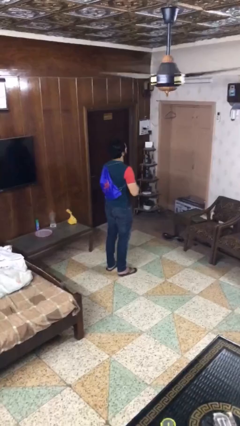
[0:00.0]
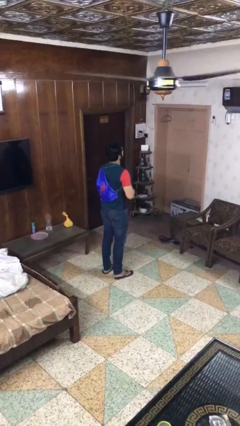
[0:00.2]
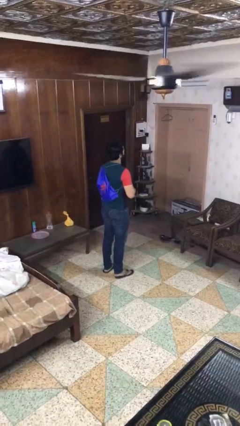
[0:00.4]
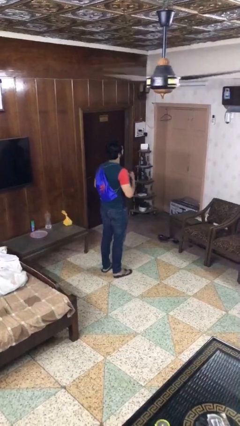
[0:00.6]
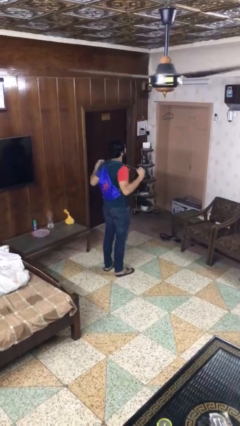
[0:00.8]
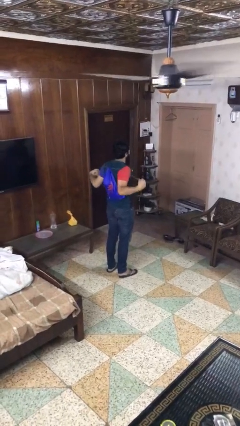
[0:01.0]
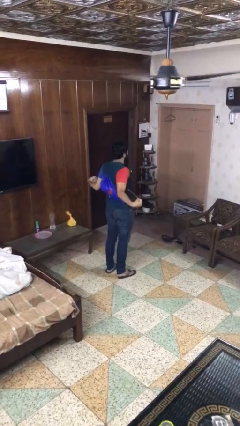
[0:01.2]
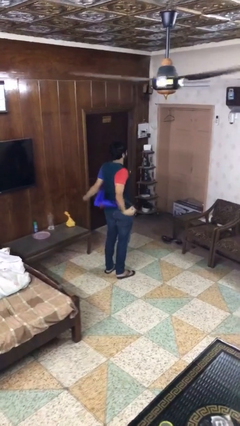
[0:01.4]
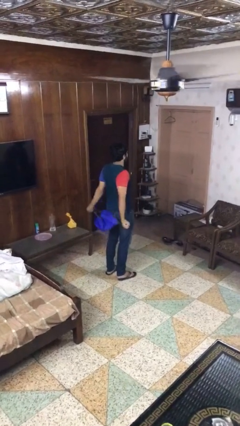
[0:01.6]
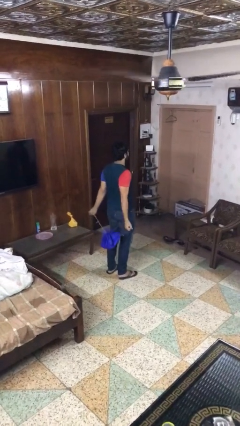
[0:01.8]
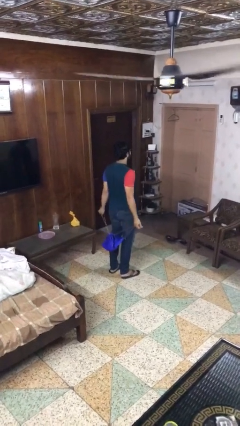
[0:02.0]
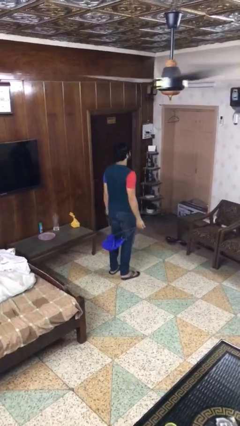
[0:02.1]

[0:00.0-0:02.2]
person takes off backpack

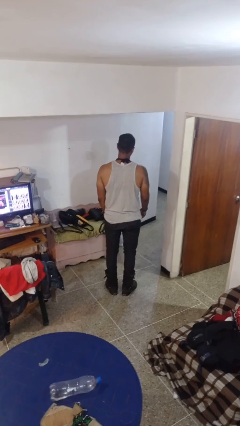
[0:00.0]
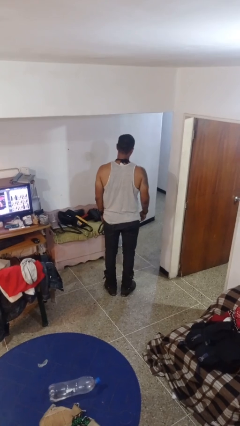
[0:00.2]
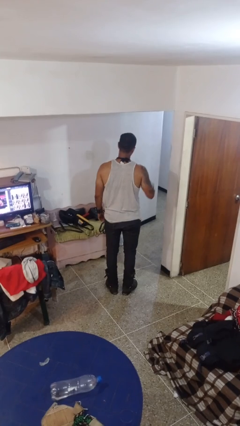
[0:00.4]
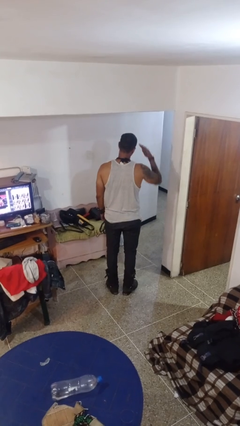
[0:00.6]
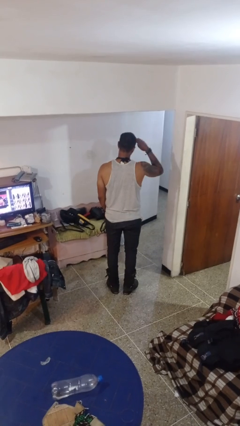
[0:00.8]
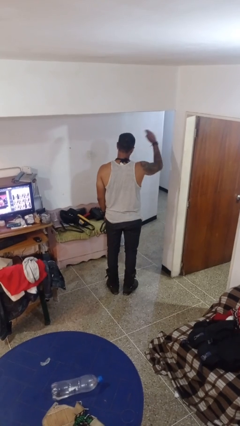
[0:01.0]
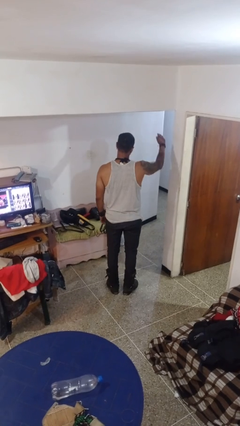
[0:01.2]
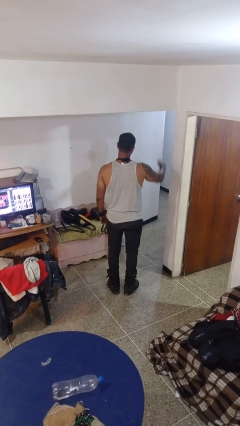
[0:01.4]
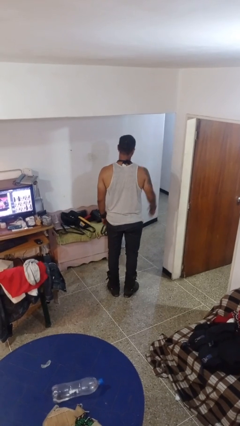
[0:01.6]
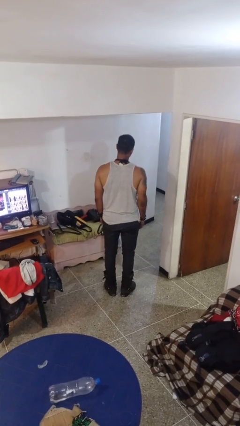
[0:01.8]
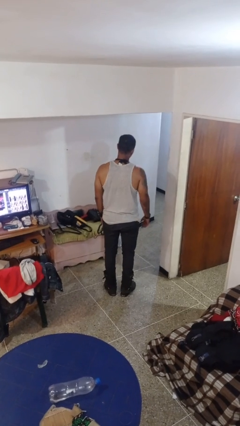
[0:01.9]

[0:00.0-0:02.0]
person salutes

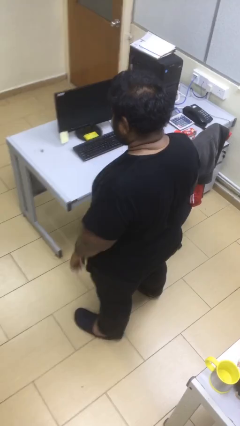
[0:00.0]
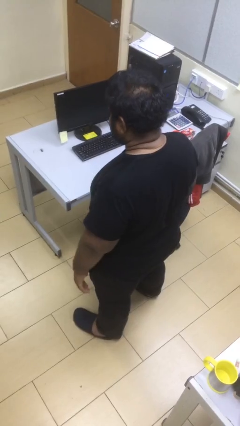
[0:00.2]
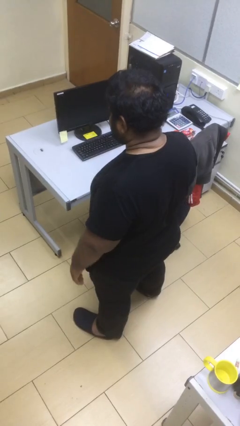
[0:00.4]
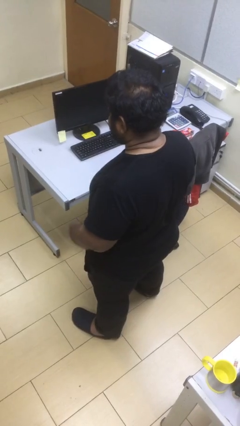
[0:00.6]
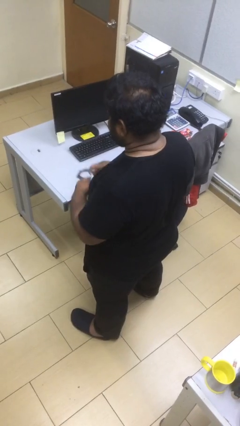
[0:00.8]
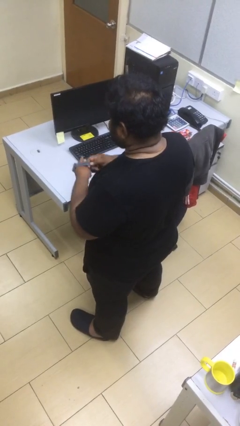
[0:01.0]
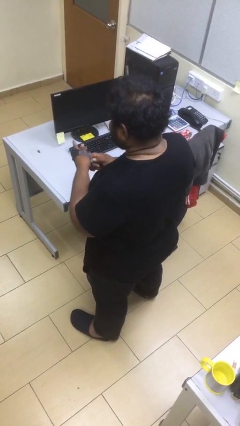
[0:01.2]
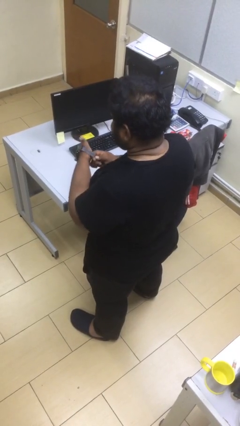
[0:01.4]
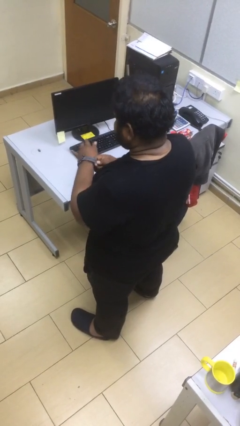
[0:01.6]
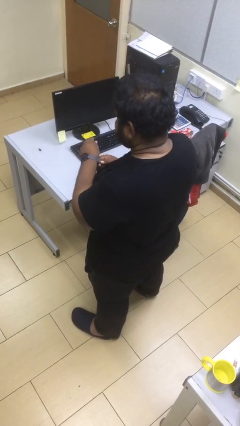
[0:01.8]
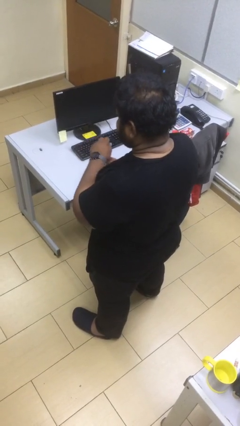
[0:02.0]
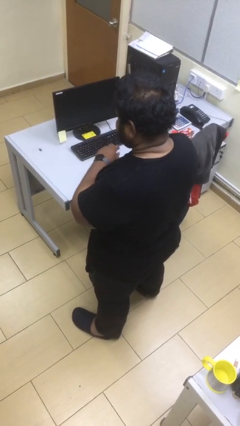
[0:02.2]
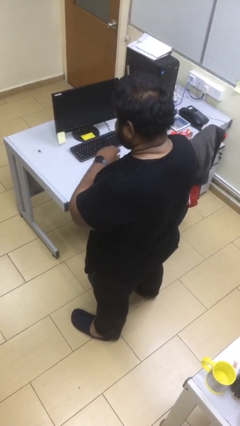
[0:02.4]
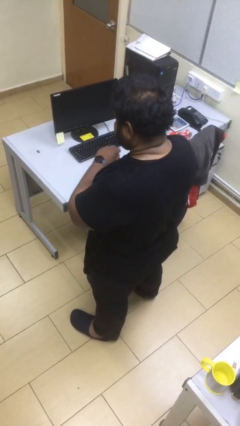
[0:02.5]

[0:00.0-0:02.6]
person puts on wristwatch

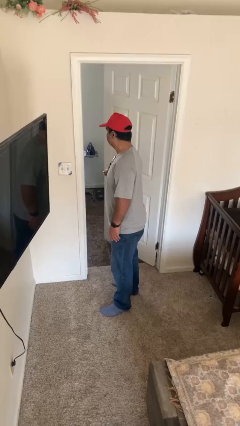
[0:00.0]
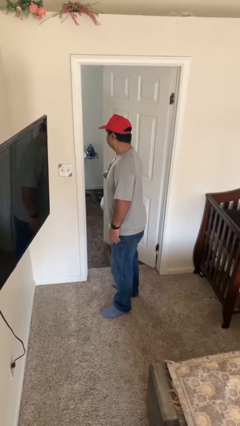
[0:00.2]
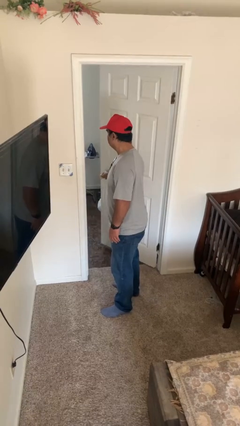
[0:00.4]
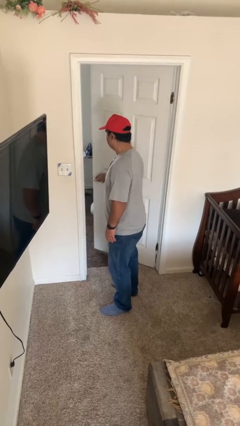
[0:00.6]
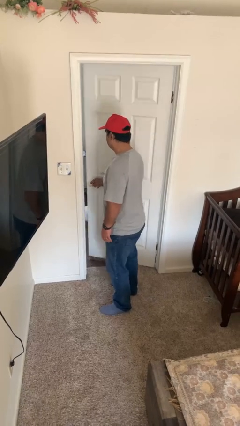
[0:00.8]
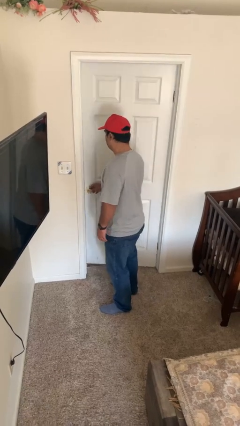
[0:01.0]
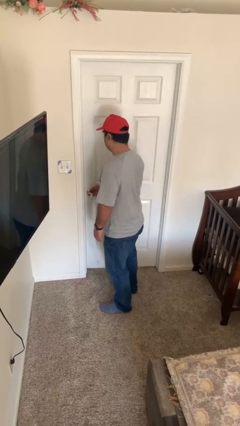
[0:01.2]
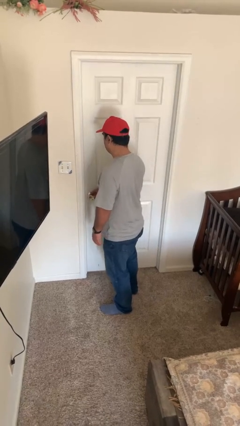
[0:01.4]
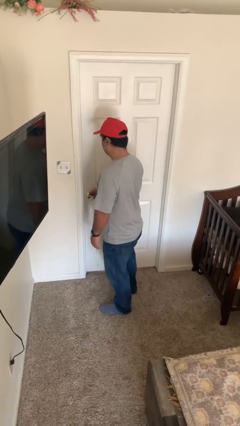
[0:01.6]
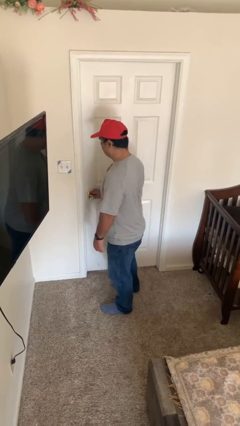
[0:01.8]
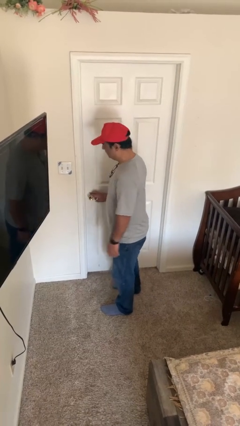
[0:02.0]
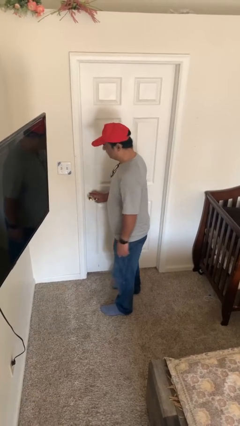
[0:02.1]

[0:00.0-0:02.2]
person closes facility door

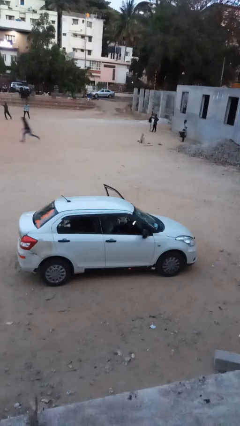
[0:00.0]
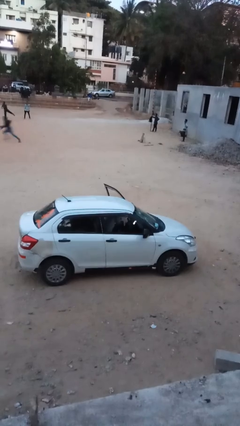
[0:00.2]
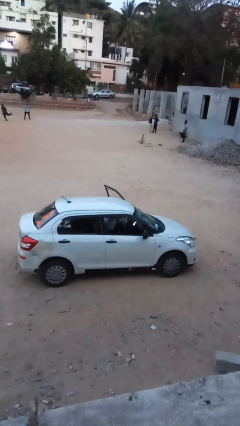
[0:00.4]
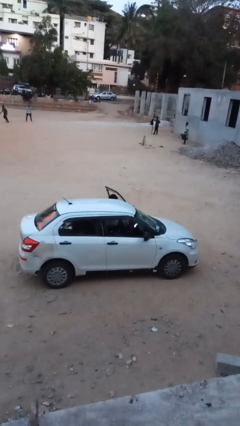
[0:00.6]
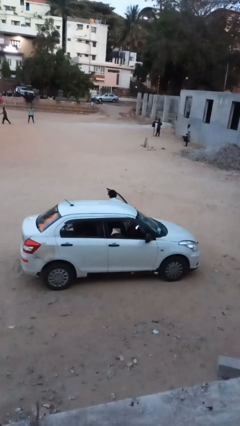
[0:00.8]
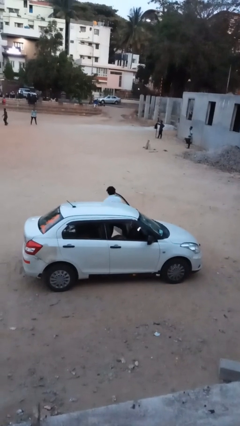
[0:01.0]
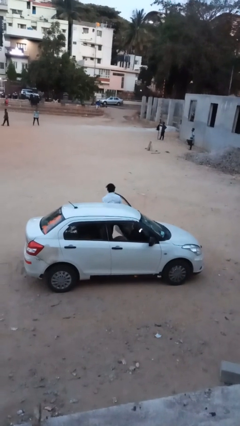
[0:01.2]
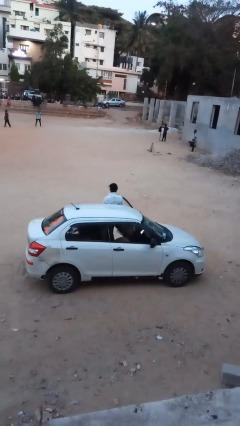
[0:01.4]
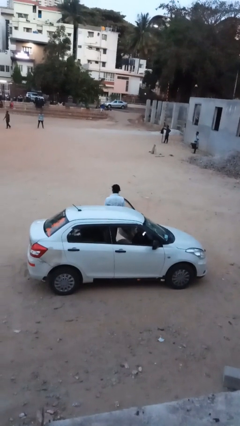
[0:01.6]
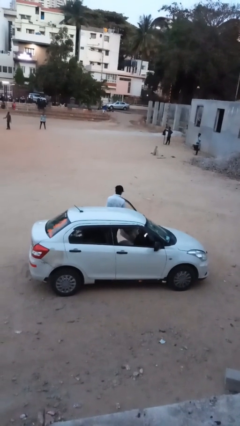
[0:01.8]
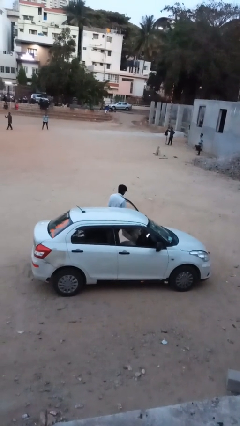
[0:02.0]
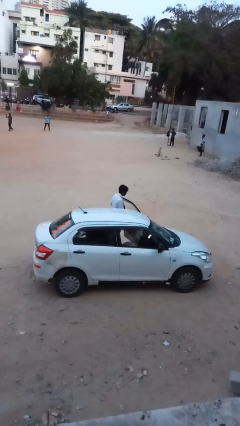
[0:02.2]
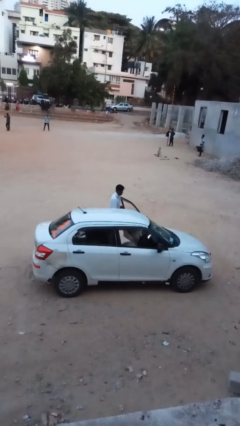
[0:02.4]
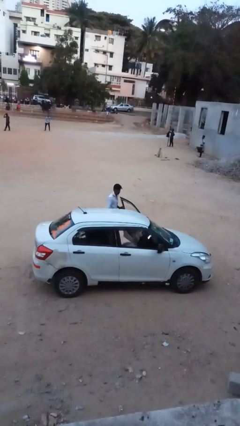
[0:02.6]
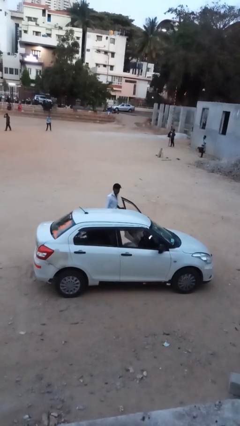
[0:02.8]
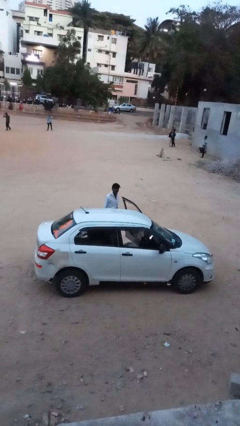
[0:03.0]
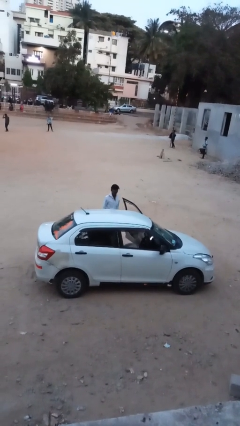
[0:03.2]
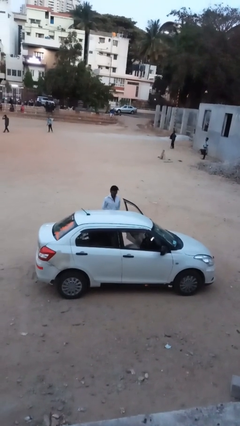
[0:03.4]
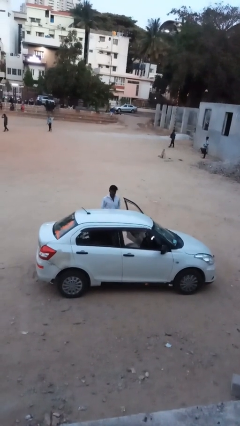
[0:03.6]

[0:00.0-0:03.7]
person exits car

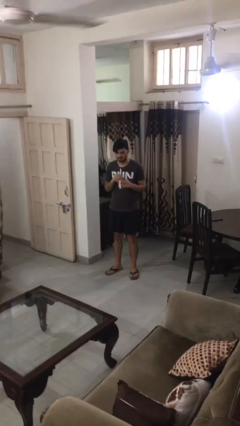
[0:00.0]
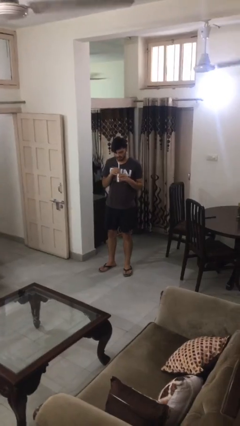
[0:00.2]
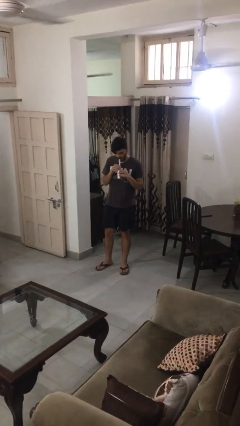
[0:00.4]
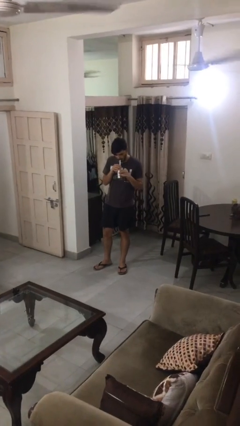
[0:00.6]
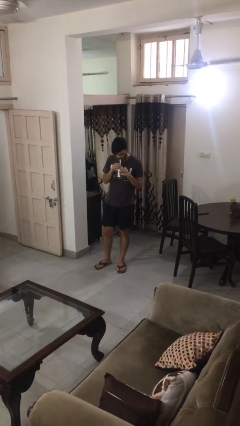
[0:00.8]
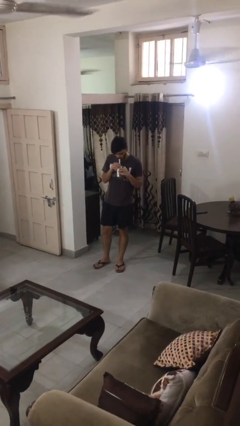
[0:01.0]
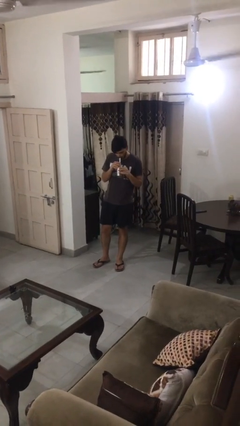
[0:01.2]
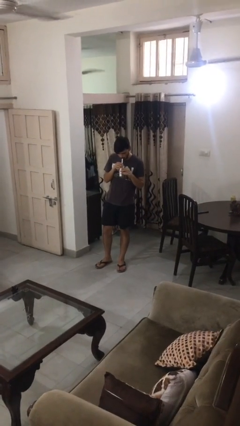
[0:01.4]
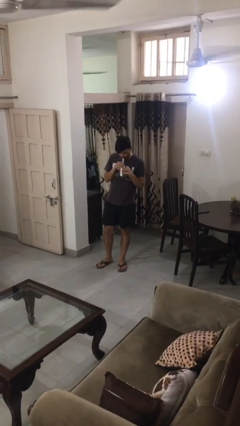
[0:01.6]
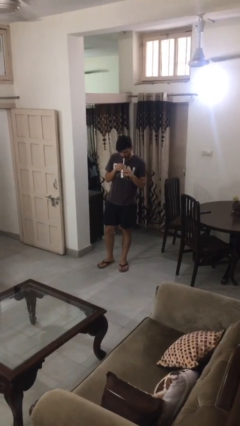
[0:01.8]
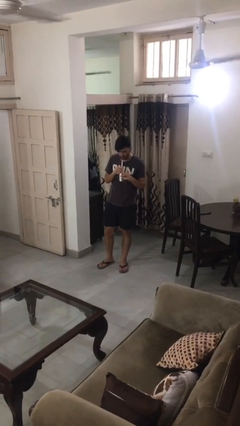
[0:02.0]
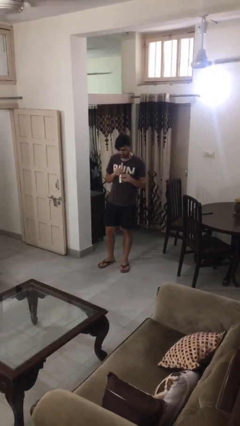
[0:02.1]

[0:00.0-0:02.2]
person drinks from straw

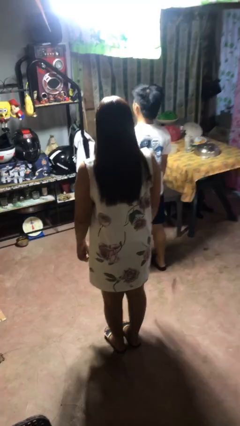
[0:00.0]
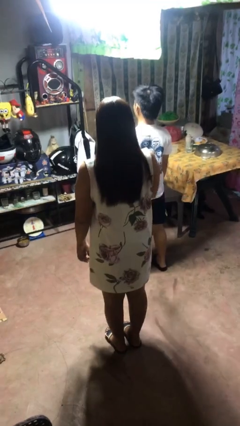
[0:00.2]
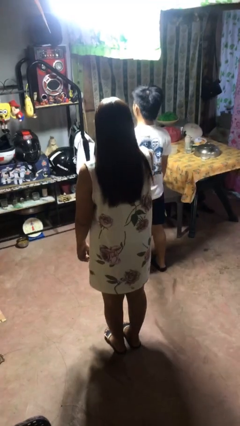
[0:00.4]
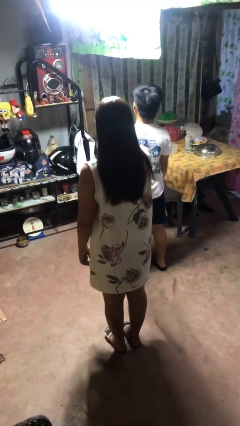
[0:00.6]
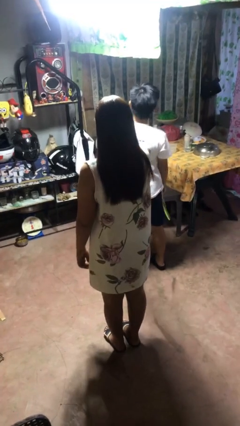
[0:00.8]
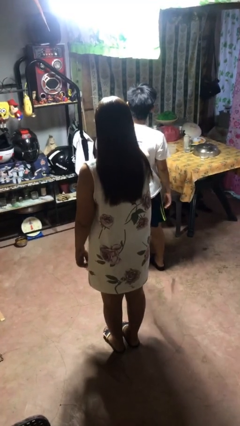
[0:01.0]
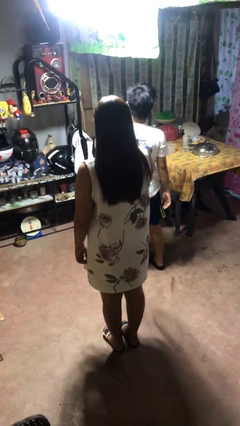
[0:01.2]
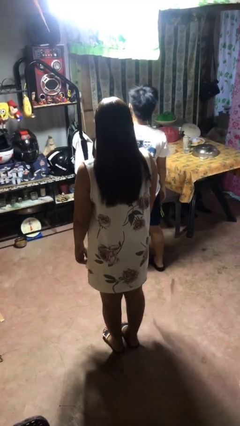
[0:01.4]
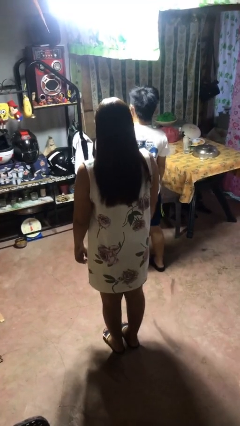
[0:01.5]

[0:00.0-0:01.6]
person shoves person

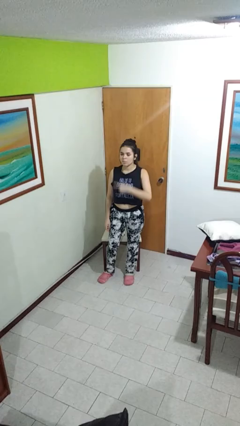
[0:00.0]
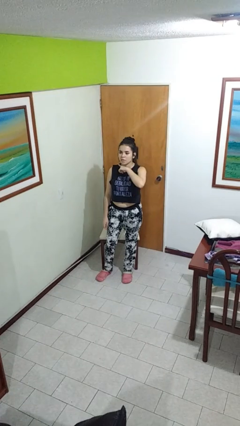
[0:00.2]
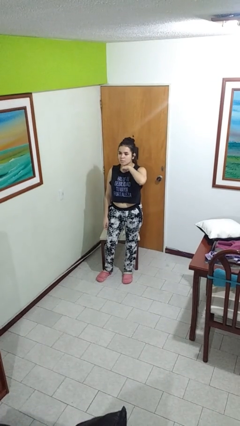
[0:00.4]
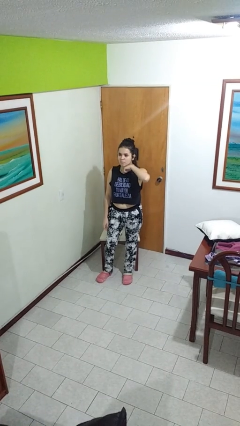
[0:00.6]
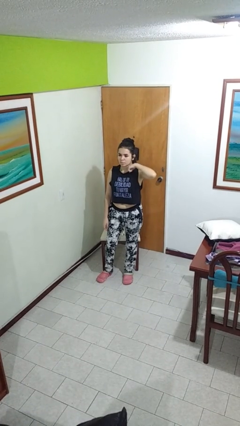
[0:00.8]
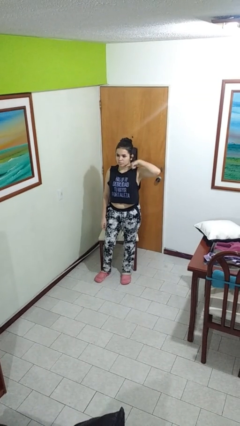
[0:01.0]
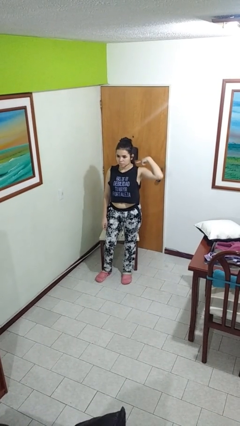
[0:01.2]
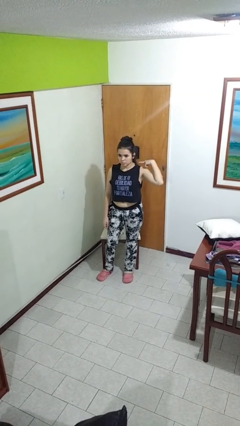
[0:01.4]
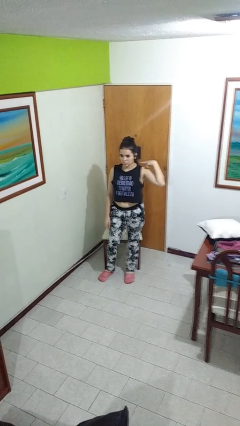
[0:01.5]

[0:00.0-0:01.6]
person gestures cut
